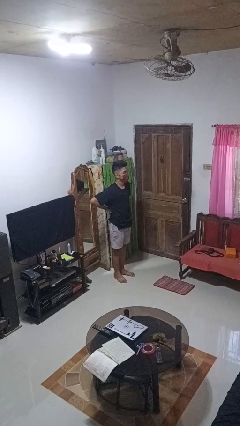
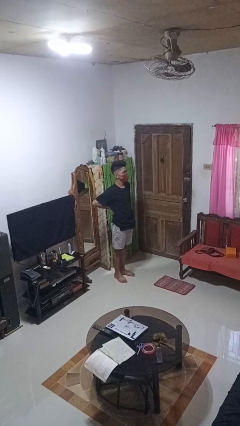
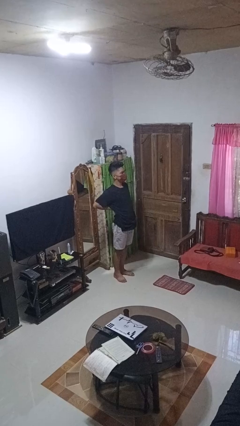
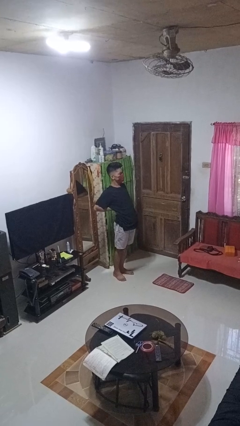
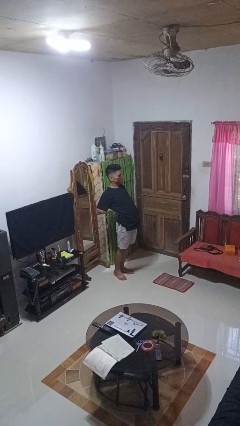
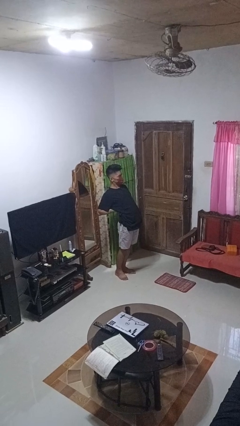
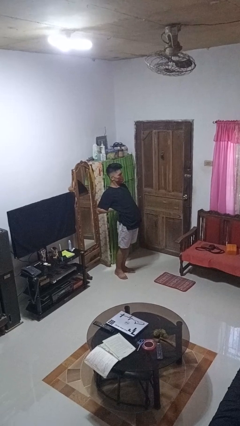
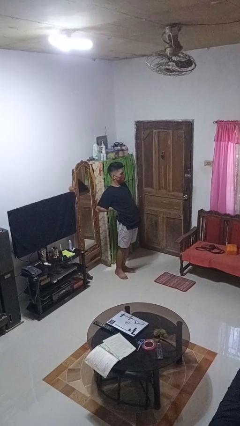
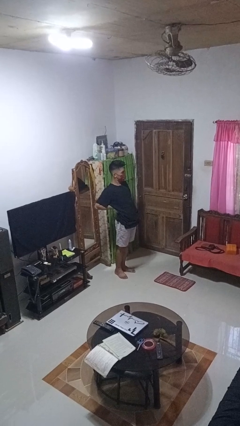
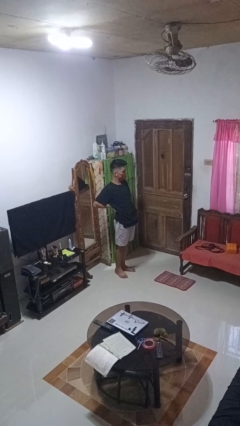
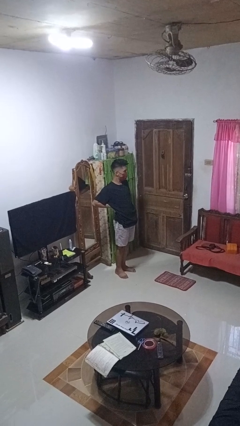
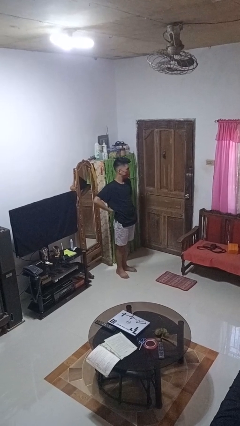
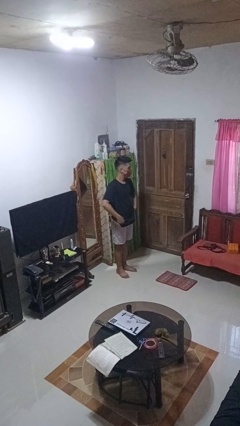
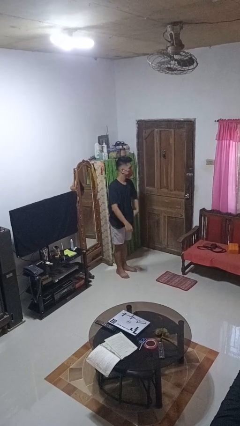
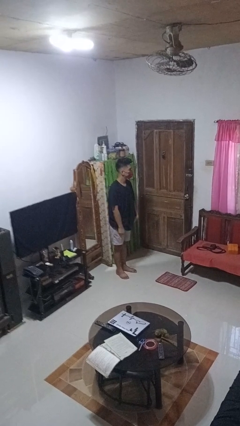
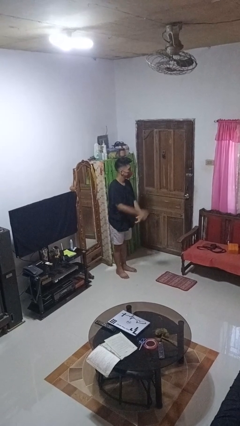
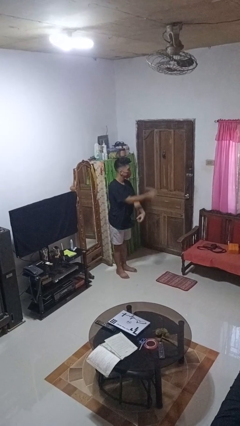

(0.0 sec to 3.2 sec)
person stretches back

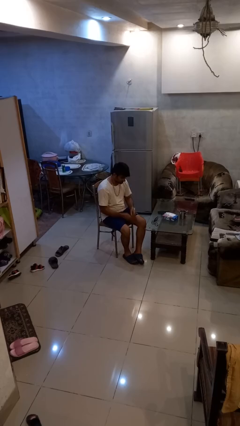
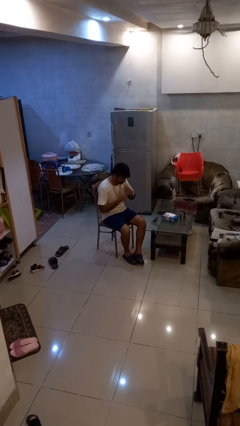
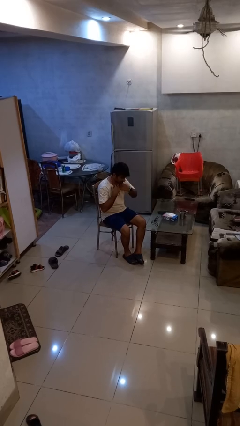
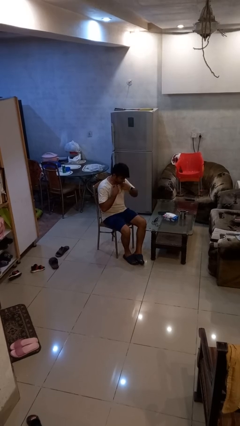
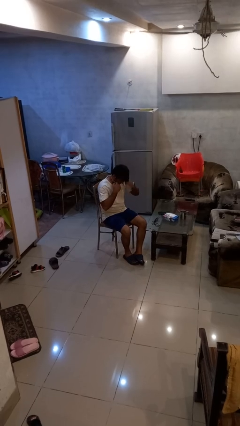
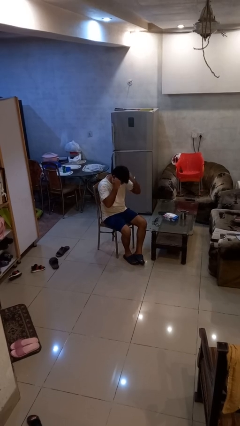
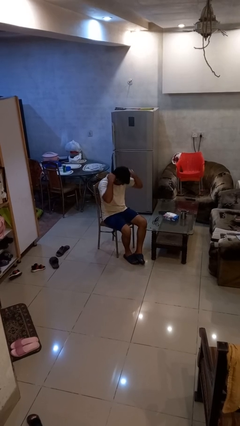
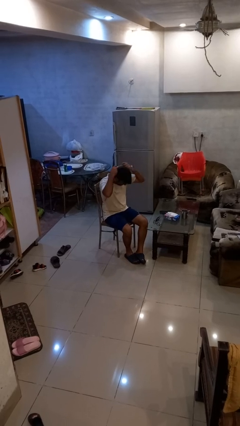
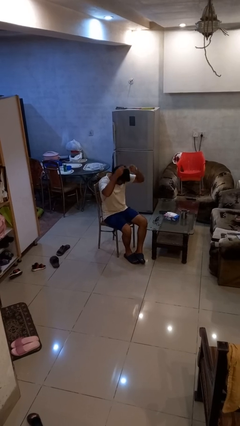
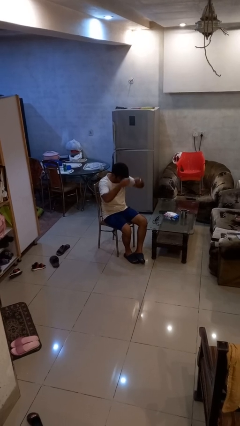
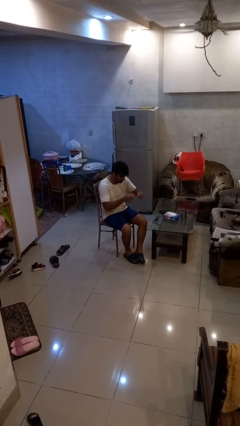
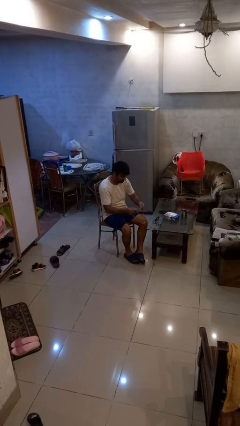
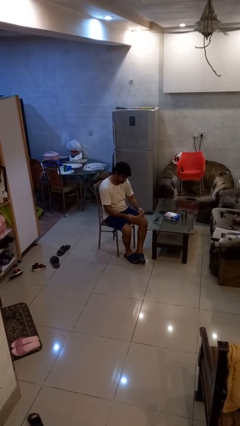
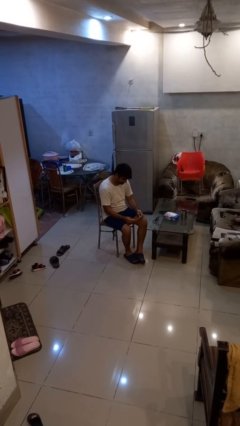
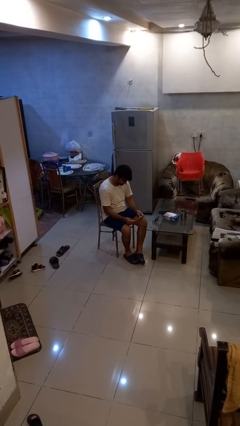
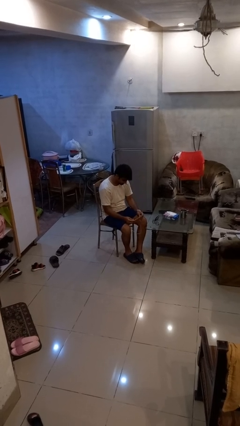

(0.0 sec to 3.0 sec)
person takes off necklace

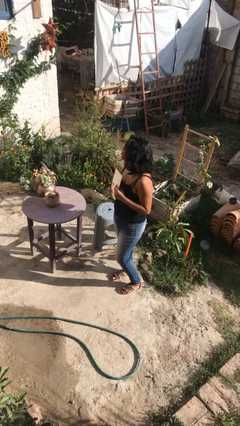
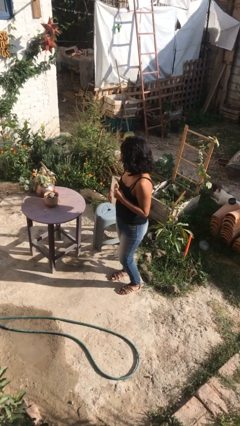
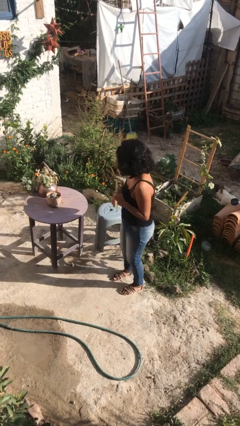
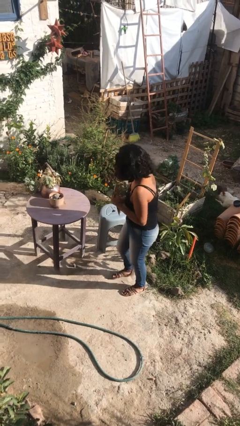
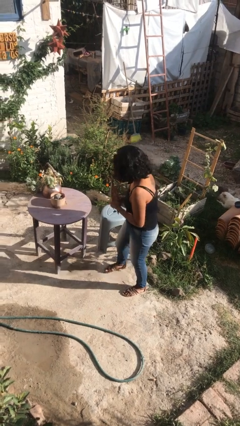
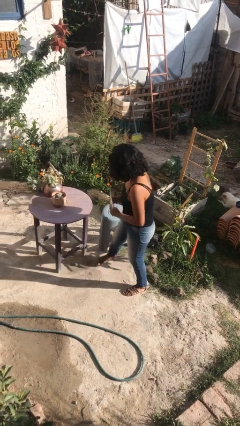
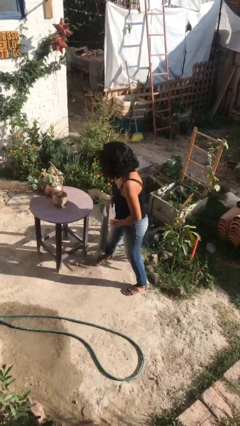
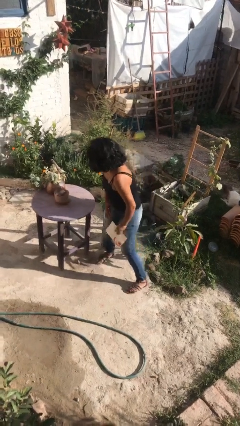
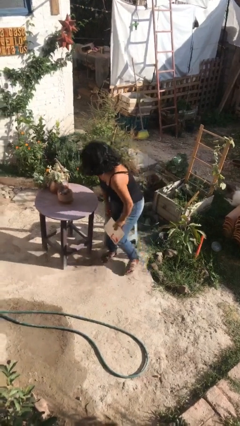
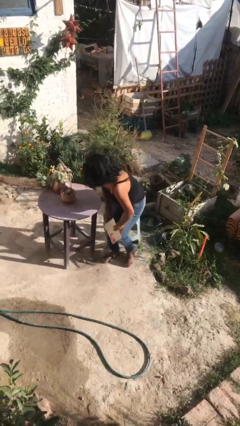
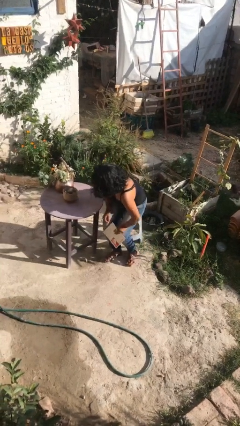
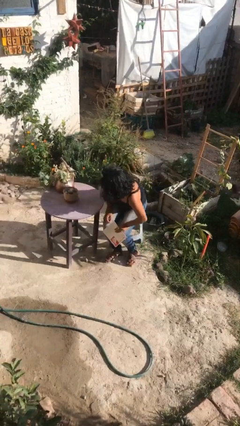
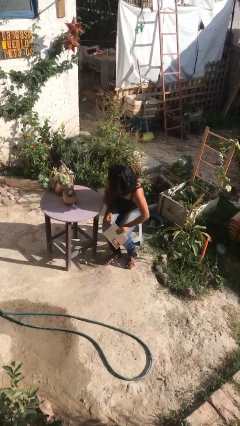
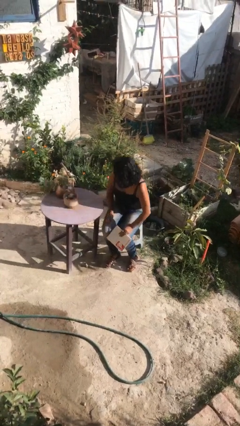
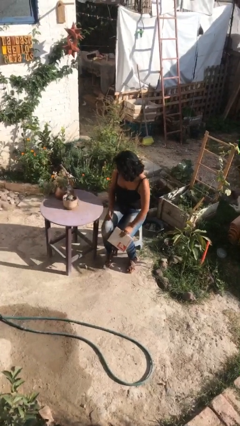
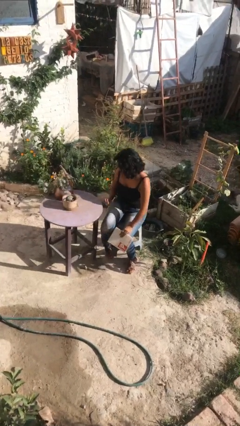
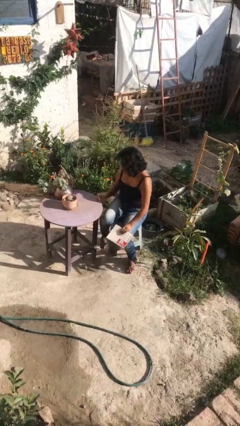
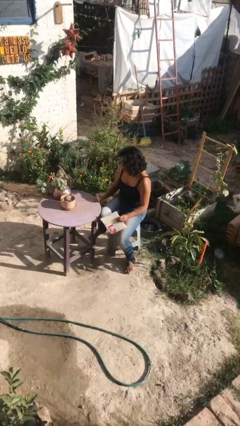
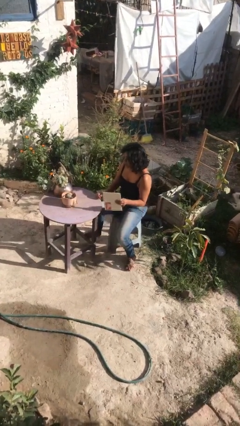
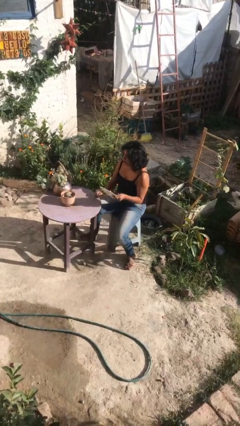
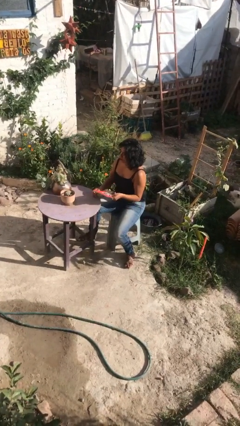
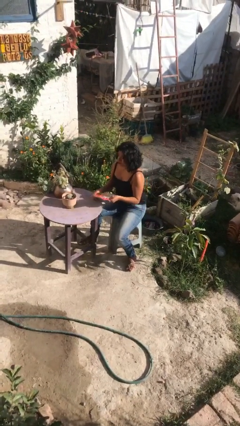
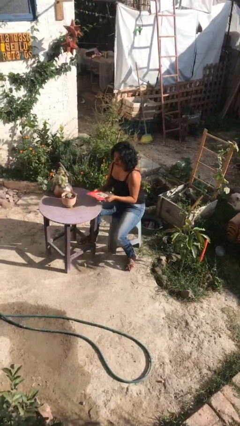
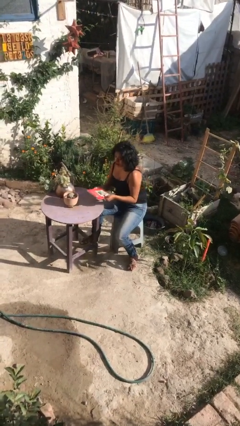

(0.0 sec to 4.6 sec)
person sits down

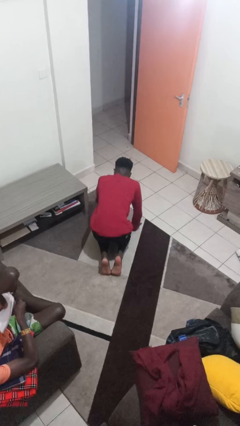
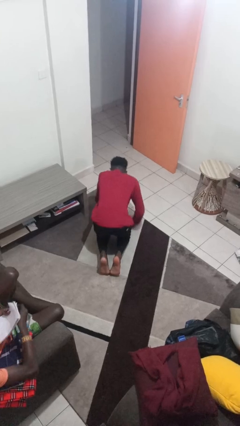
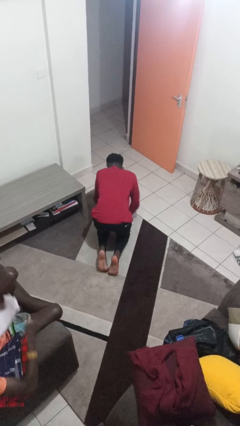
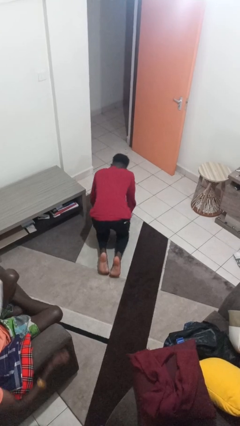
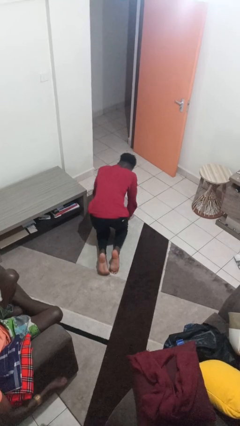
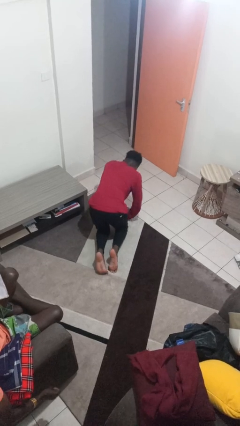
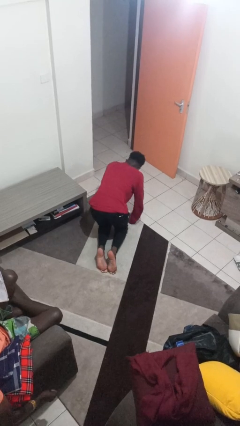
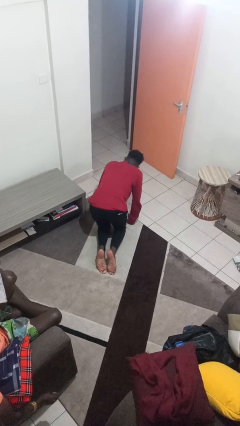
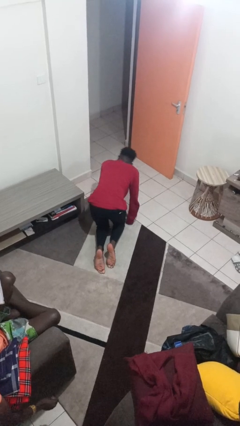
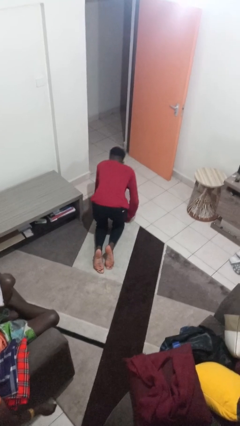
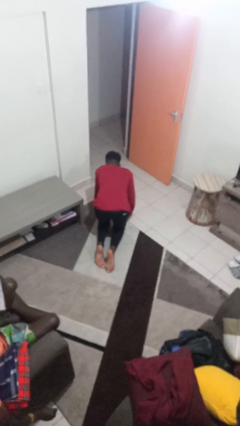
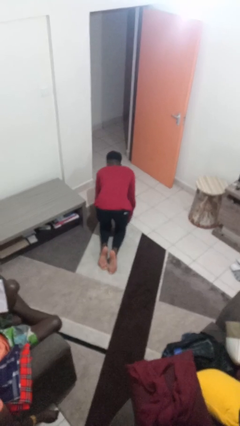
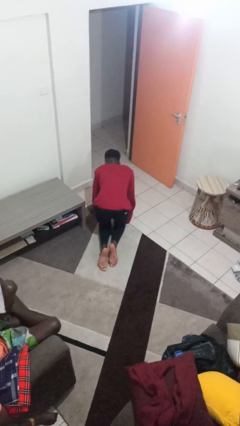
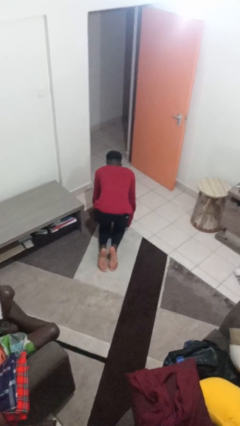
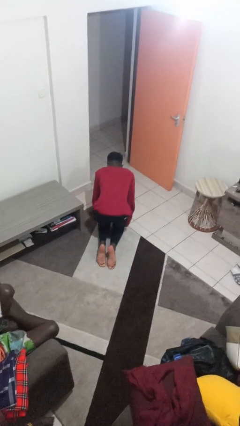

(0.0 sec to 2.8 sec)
person crawls

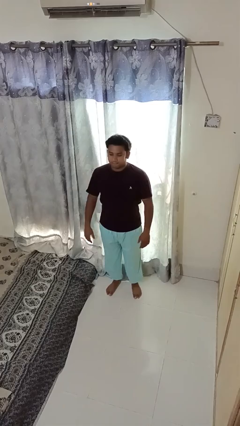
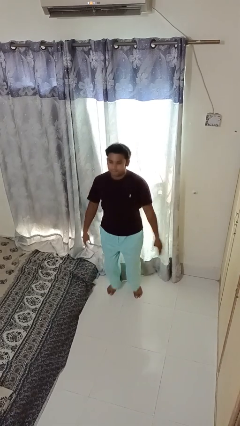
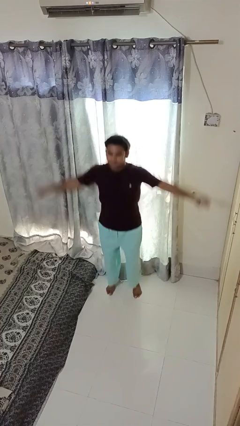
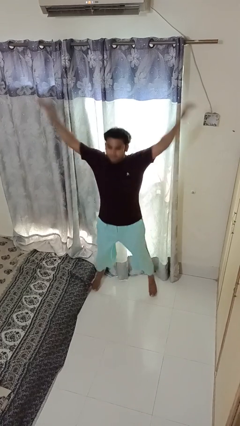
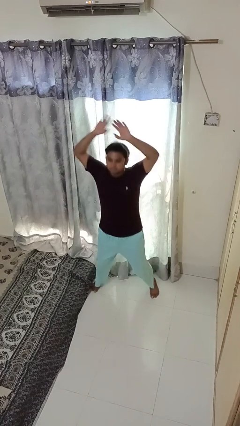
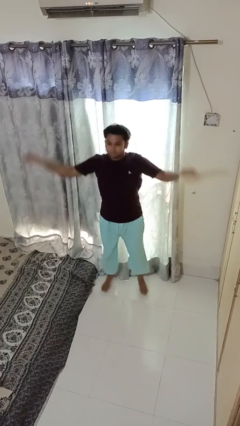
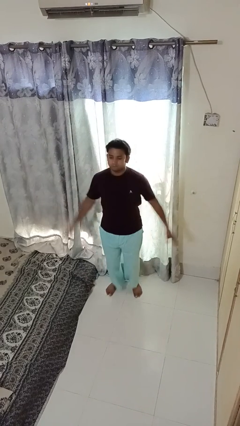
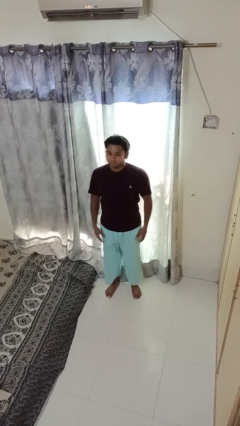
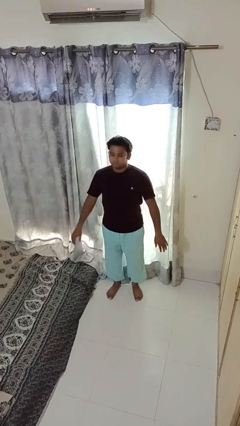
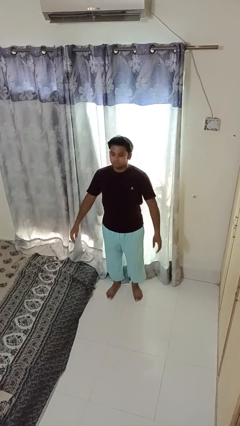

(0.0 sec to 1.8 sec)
person exercises with jumping jacks

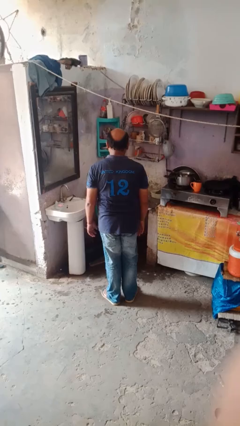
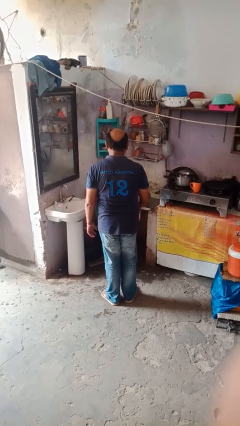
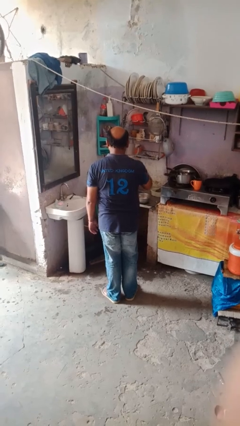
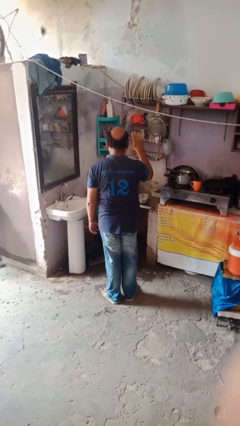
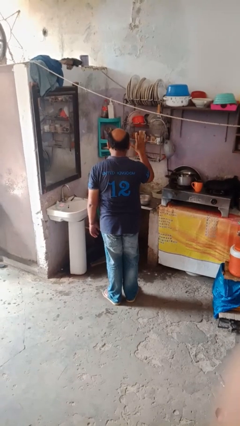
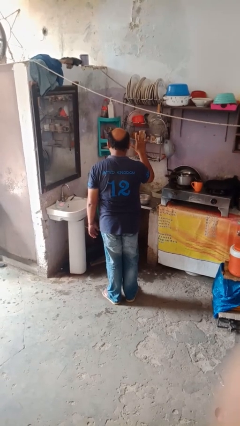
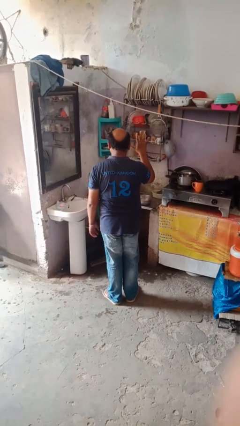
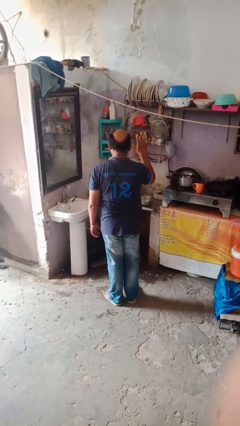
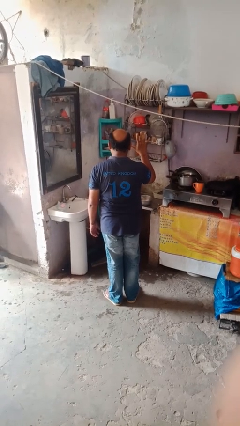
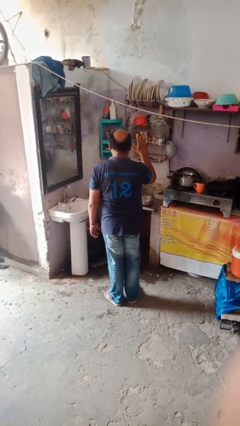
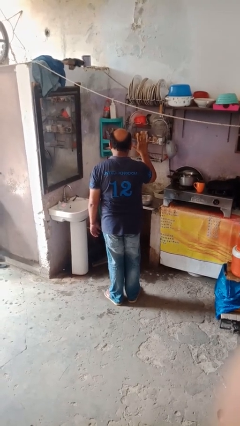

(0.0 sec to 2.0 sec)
person gestures number five
